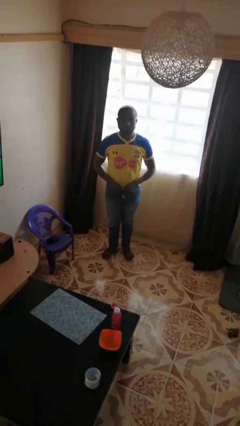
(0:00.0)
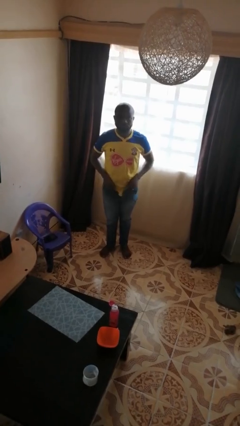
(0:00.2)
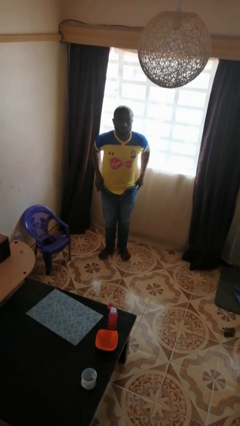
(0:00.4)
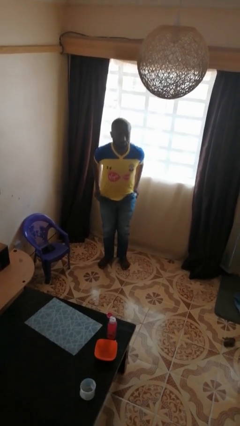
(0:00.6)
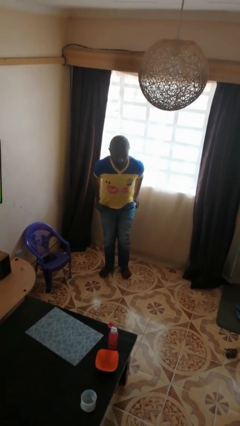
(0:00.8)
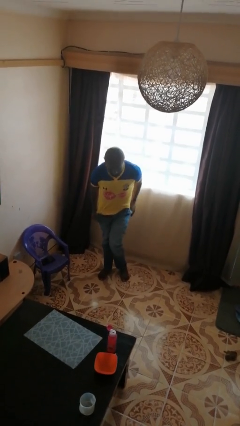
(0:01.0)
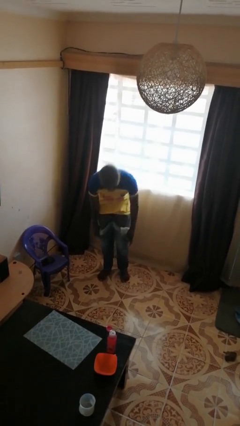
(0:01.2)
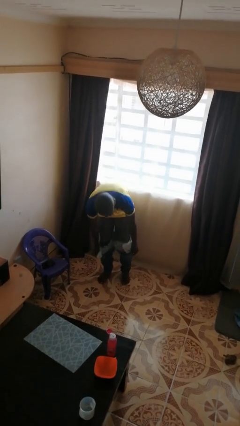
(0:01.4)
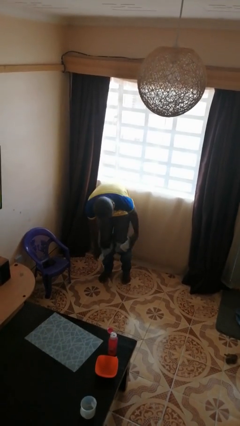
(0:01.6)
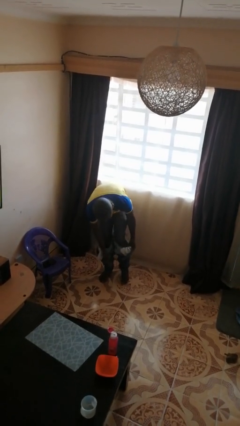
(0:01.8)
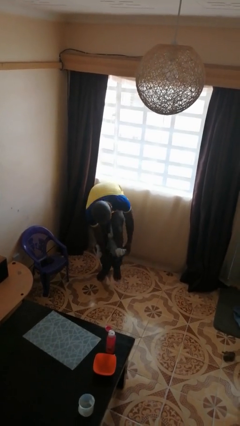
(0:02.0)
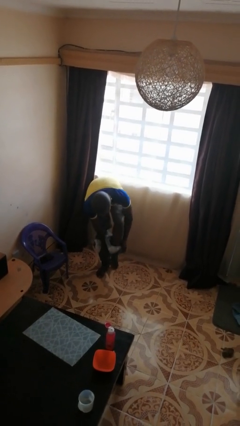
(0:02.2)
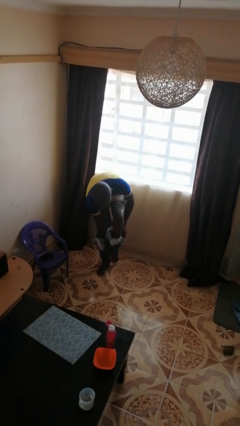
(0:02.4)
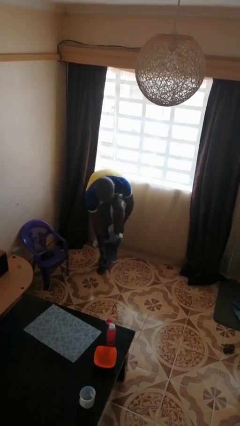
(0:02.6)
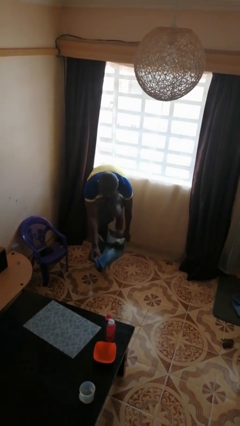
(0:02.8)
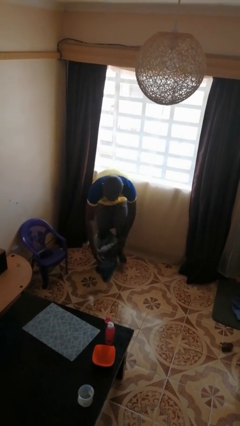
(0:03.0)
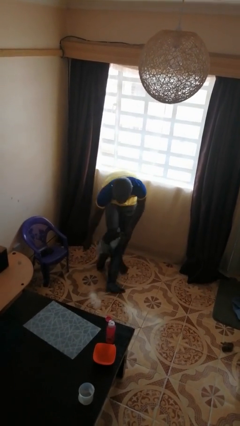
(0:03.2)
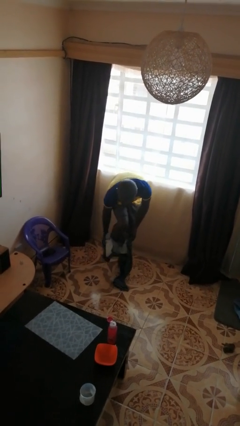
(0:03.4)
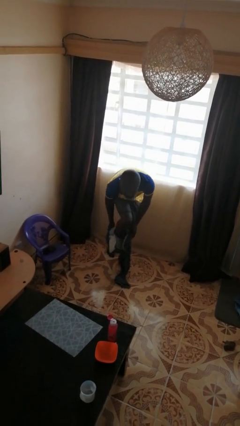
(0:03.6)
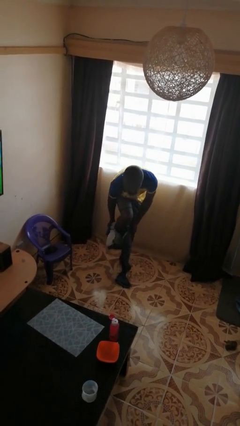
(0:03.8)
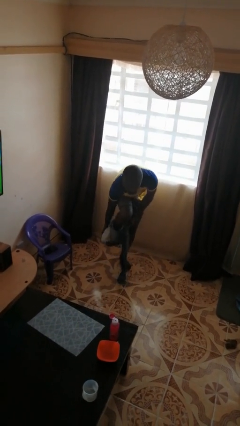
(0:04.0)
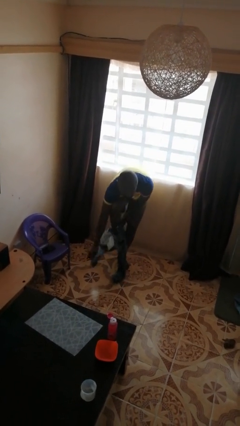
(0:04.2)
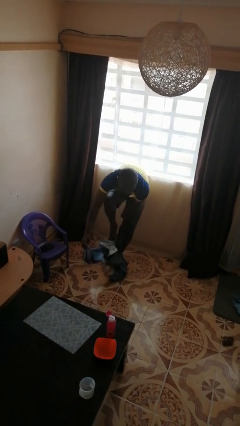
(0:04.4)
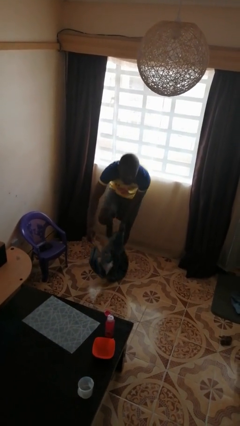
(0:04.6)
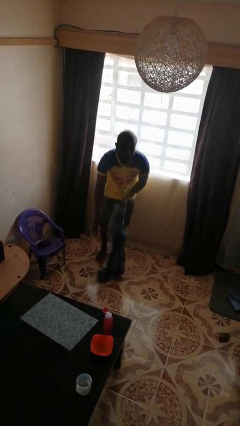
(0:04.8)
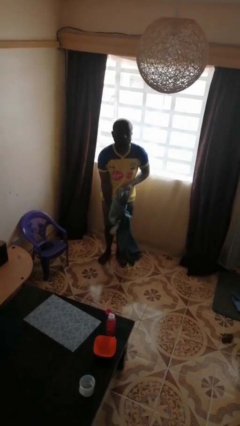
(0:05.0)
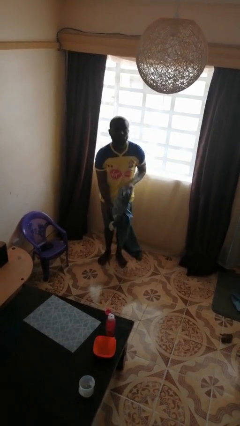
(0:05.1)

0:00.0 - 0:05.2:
person takes off pants

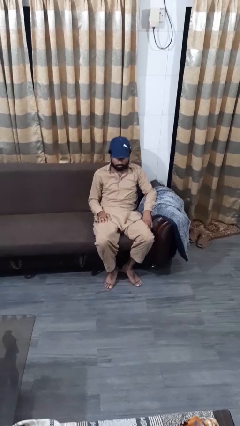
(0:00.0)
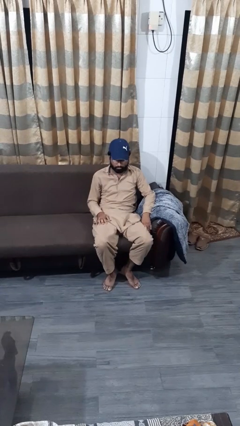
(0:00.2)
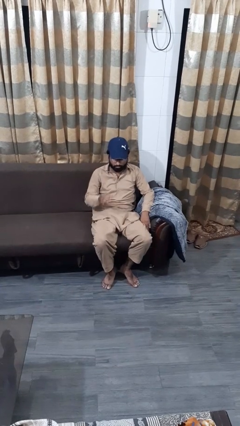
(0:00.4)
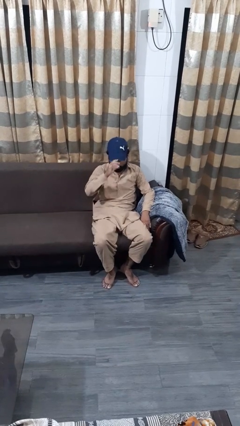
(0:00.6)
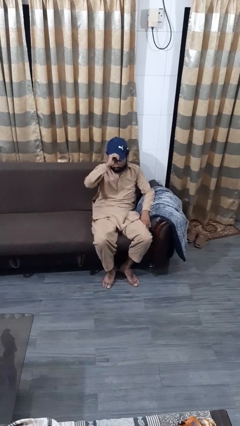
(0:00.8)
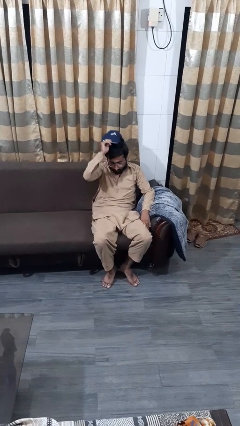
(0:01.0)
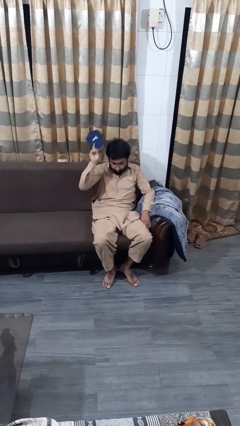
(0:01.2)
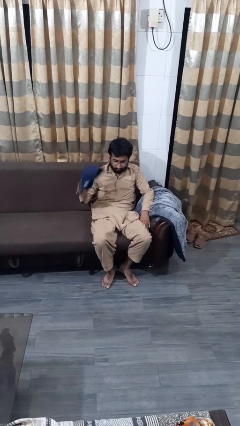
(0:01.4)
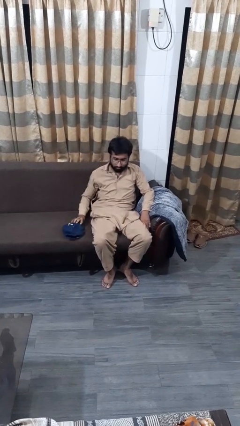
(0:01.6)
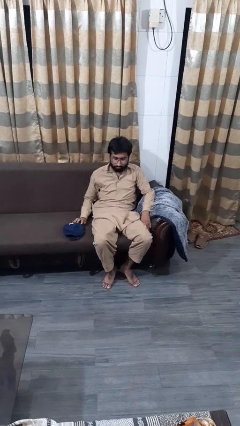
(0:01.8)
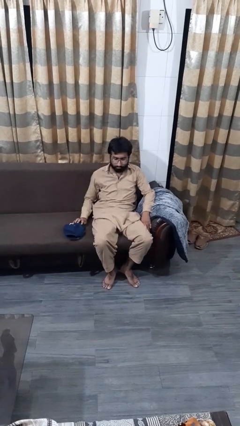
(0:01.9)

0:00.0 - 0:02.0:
person takes off hat

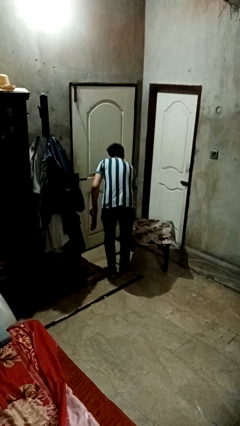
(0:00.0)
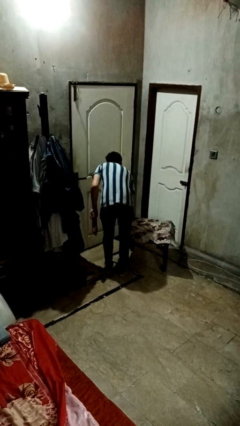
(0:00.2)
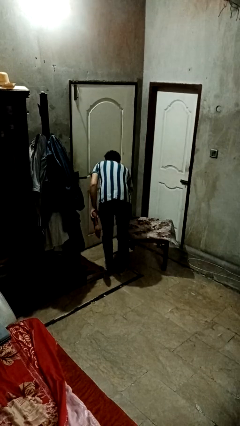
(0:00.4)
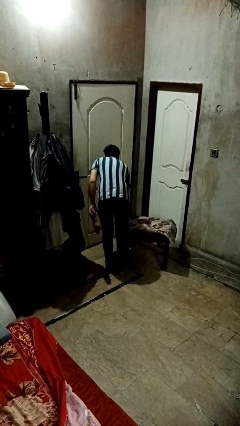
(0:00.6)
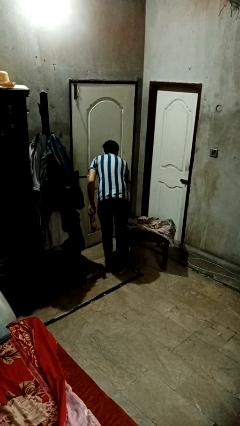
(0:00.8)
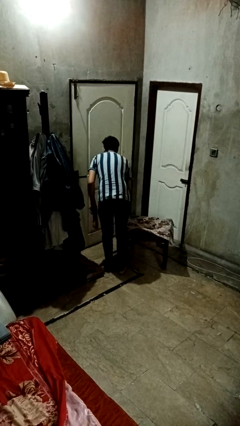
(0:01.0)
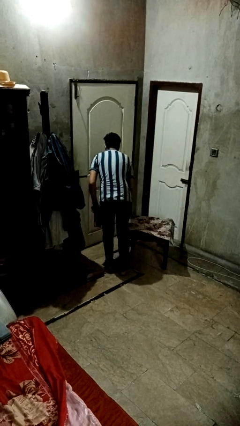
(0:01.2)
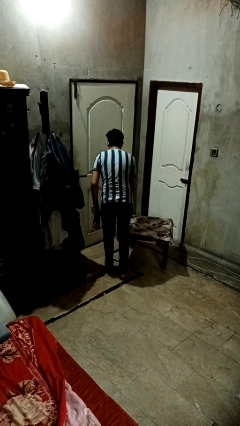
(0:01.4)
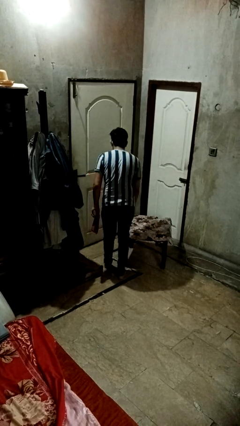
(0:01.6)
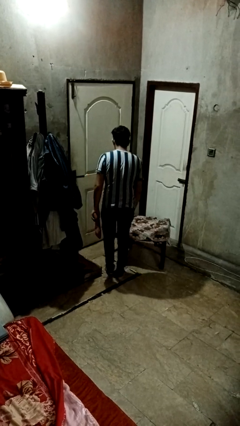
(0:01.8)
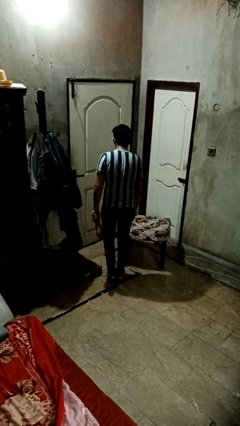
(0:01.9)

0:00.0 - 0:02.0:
person bumps into table

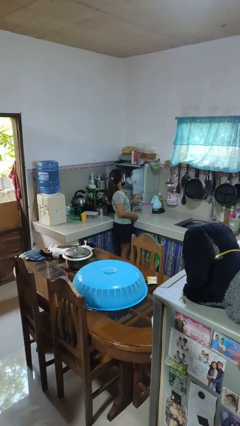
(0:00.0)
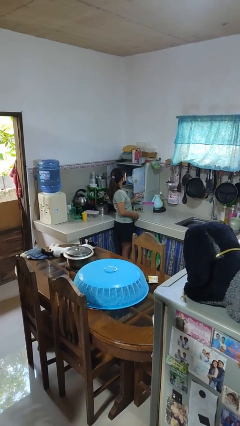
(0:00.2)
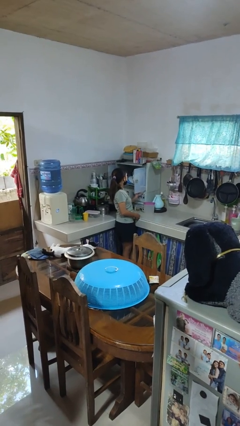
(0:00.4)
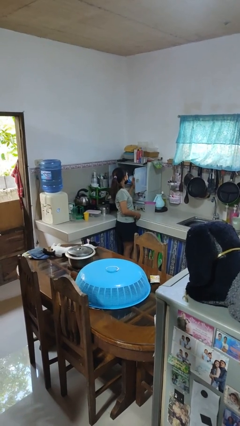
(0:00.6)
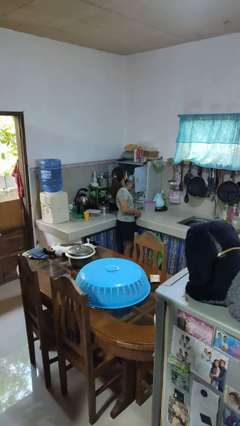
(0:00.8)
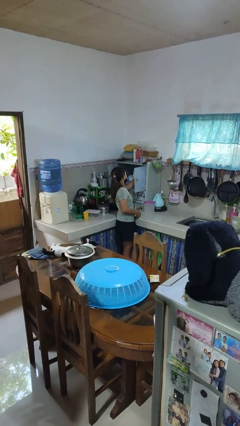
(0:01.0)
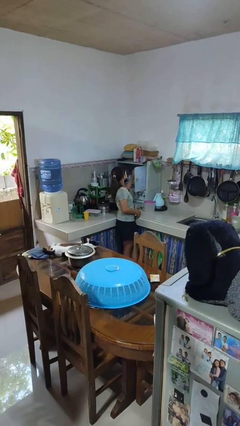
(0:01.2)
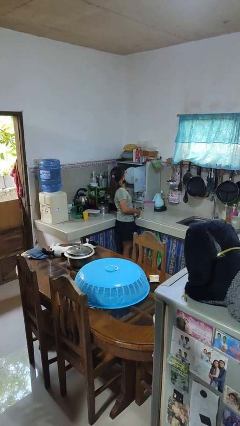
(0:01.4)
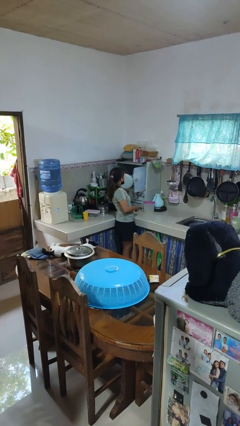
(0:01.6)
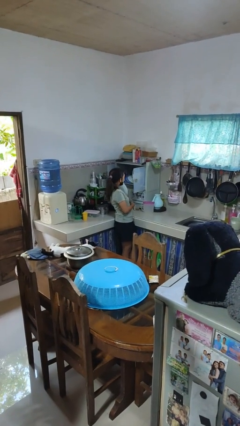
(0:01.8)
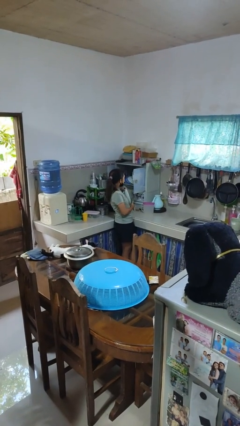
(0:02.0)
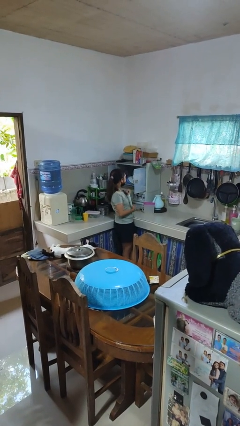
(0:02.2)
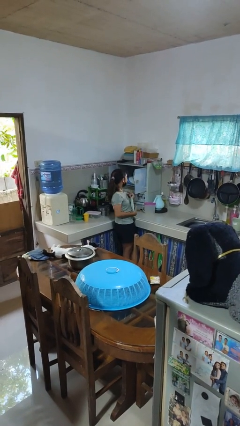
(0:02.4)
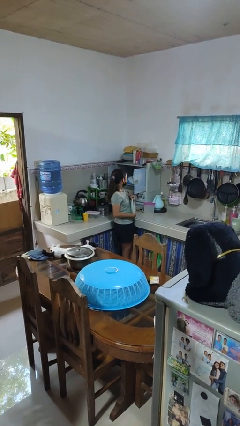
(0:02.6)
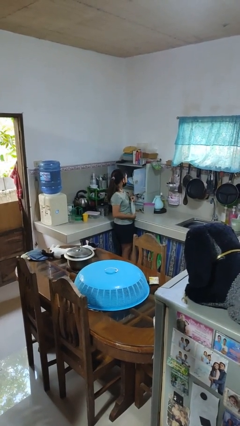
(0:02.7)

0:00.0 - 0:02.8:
person takes object from kitchen drawer

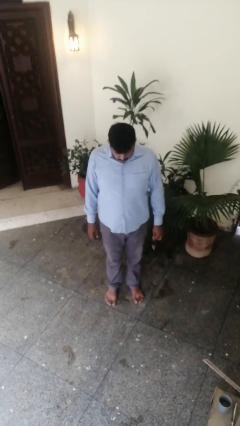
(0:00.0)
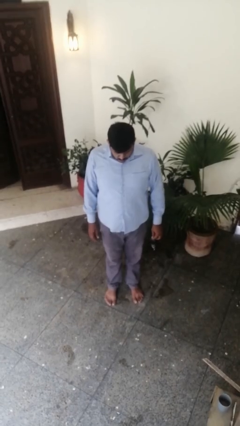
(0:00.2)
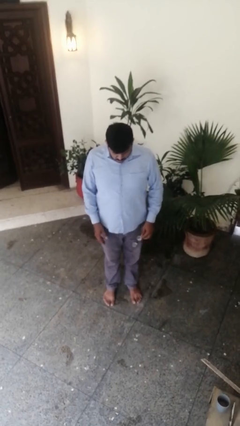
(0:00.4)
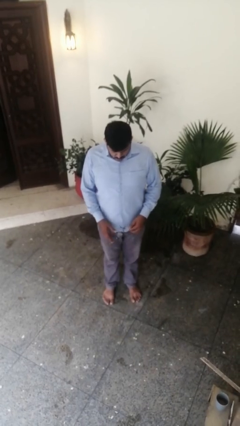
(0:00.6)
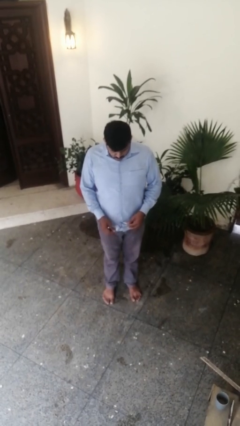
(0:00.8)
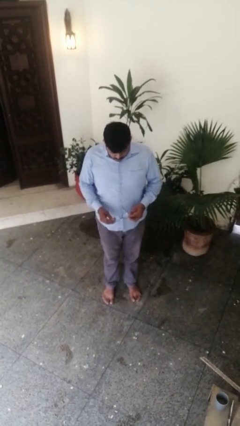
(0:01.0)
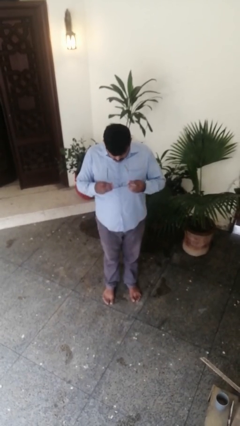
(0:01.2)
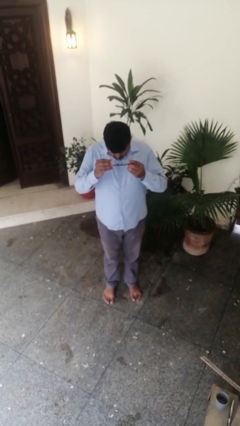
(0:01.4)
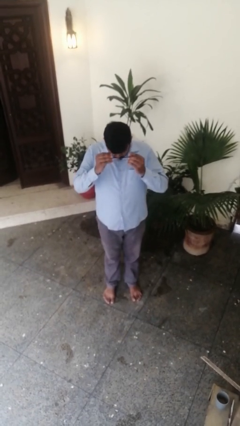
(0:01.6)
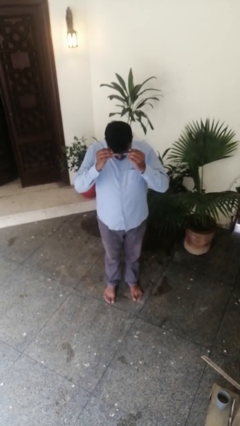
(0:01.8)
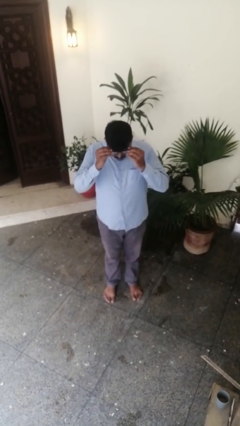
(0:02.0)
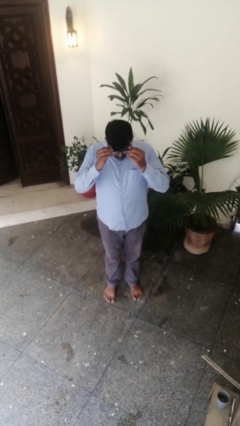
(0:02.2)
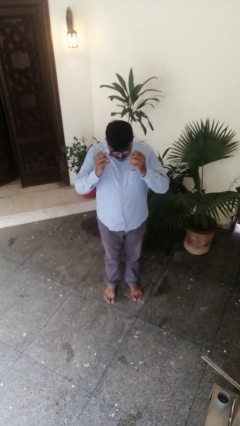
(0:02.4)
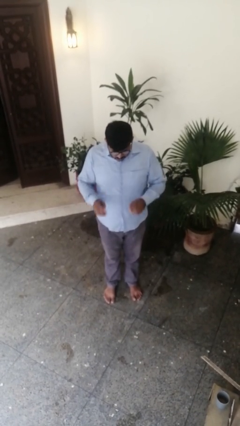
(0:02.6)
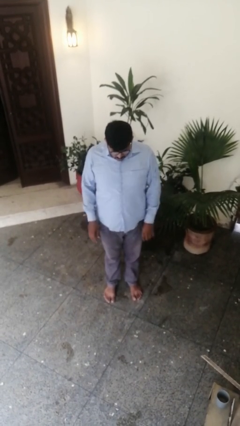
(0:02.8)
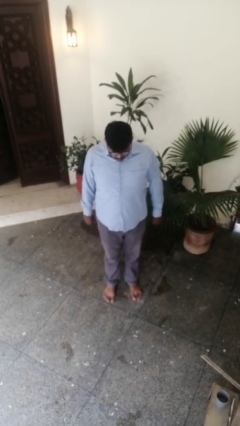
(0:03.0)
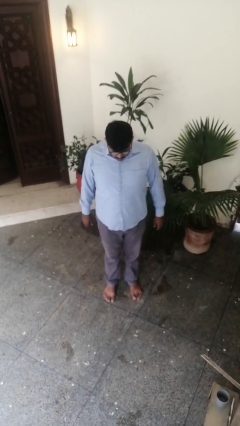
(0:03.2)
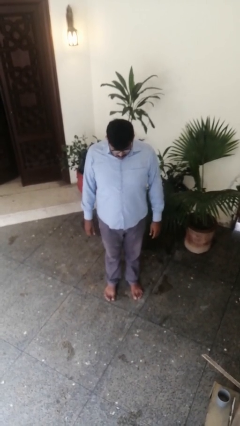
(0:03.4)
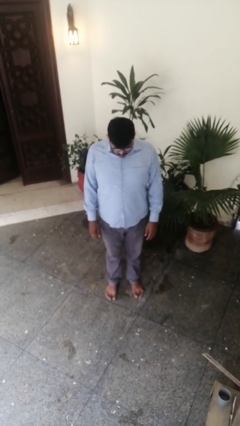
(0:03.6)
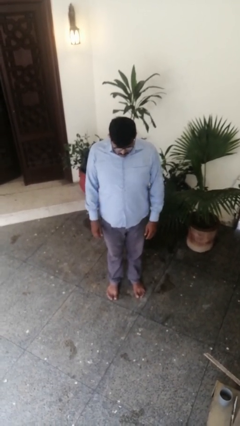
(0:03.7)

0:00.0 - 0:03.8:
person puts on glasses

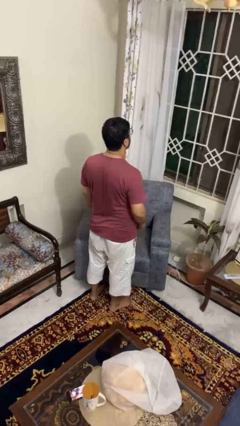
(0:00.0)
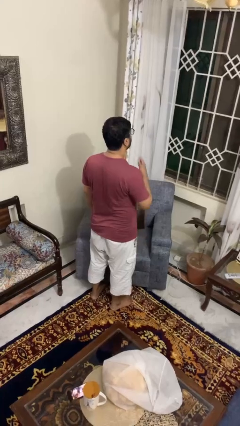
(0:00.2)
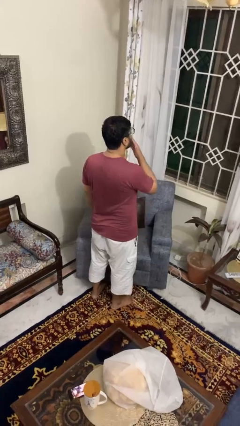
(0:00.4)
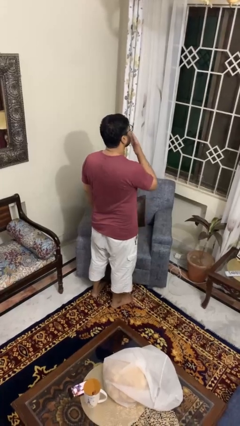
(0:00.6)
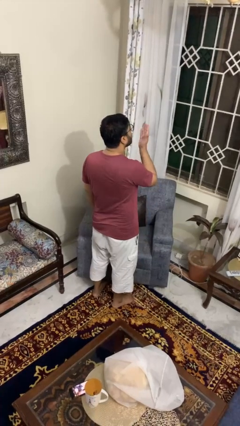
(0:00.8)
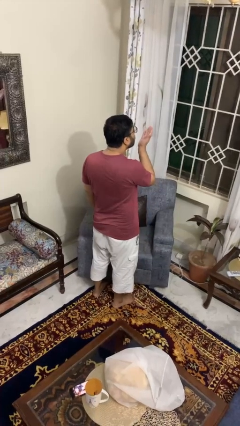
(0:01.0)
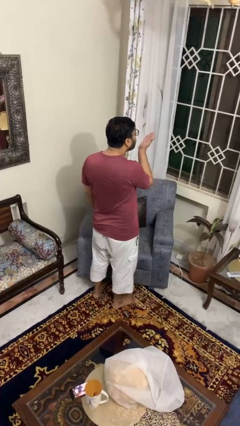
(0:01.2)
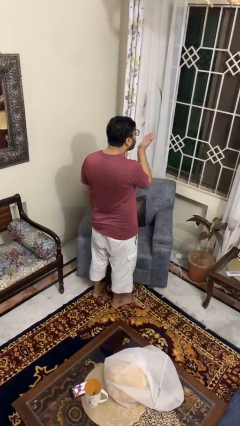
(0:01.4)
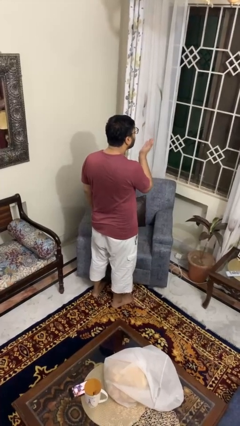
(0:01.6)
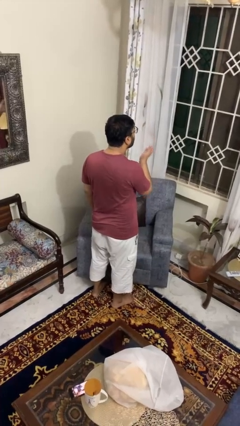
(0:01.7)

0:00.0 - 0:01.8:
person gestures blow kiss
